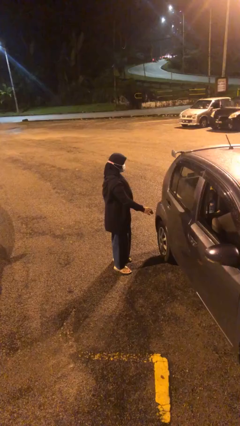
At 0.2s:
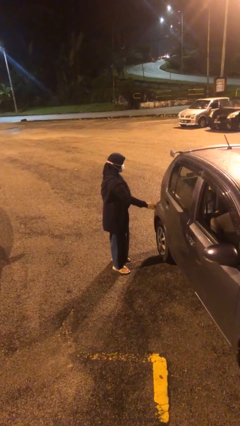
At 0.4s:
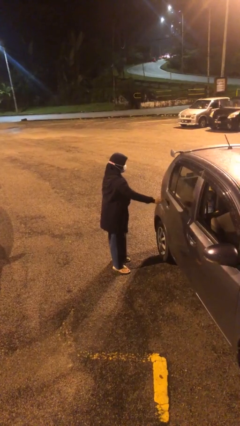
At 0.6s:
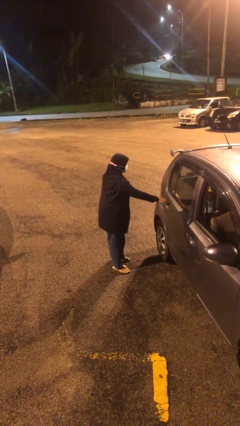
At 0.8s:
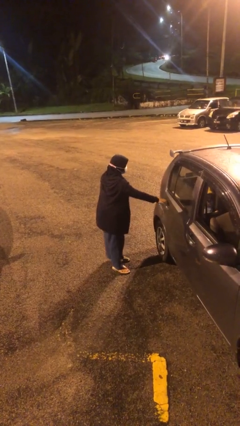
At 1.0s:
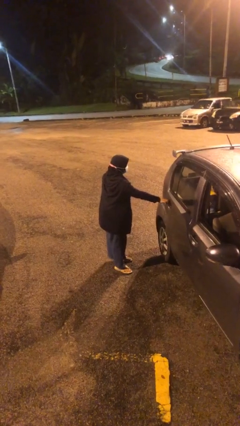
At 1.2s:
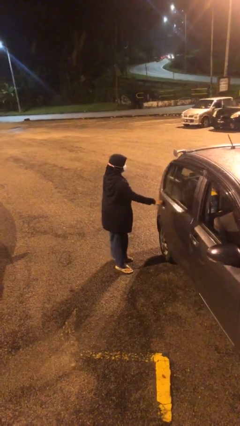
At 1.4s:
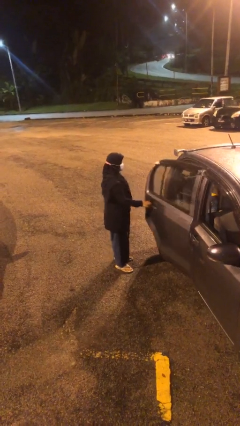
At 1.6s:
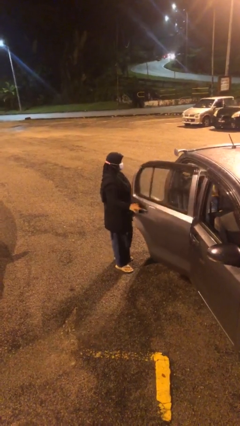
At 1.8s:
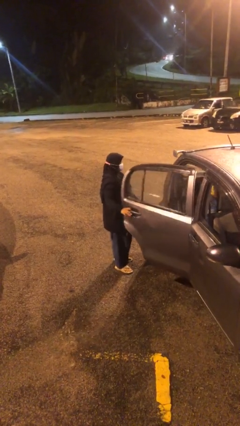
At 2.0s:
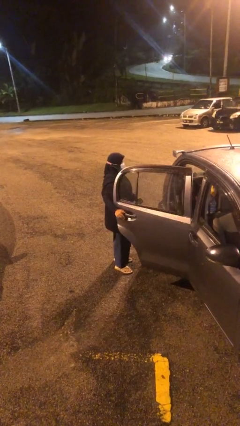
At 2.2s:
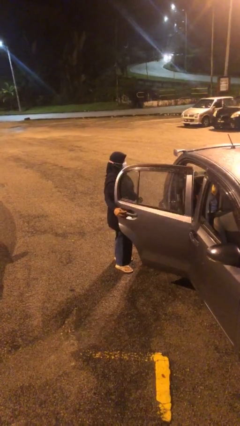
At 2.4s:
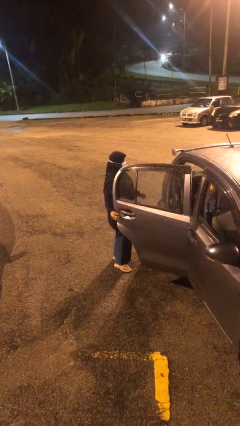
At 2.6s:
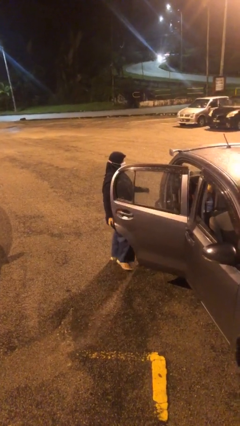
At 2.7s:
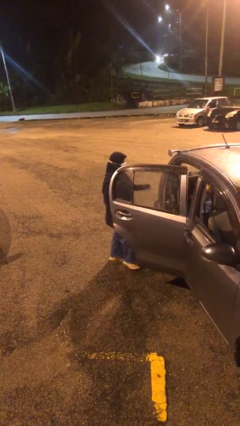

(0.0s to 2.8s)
person opens car door

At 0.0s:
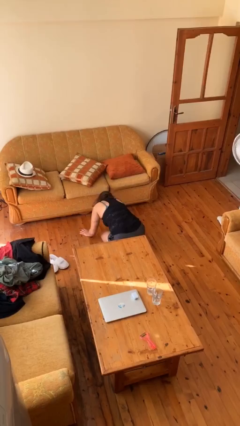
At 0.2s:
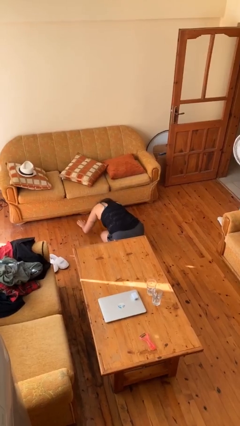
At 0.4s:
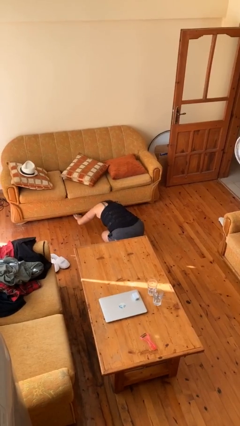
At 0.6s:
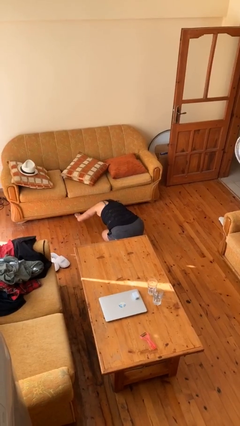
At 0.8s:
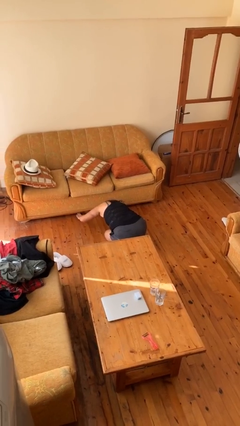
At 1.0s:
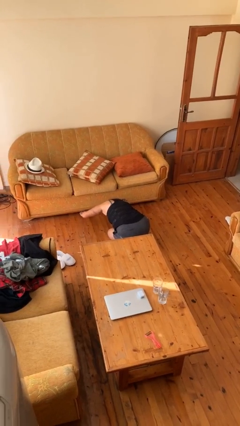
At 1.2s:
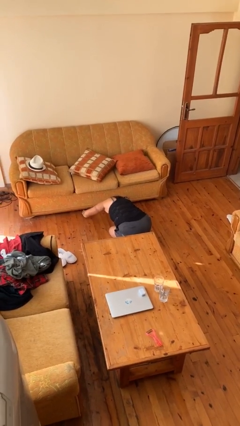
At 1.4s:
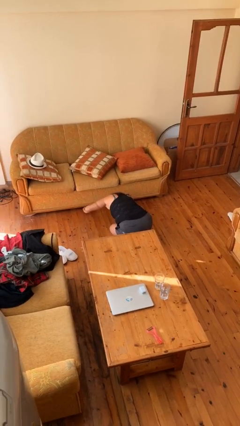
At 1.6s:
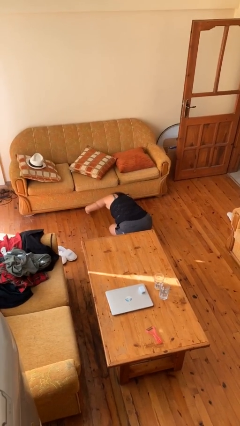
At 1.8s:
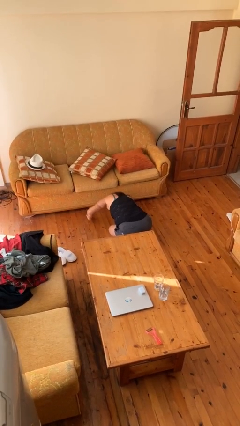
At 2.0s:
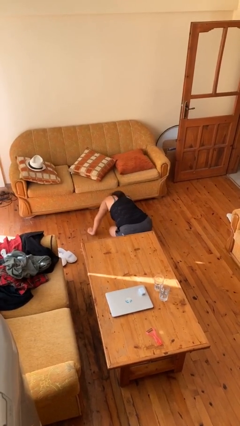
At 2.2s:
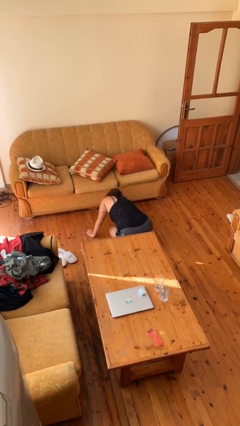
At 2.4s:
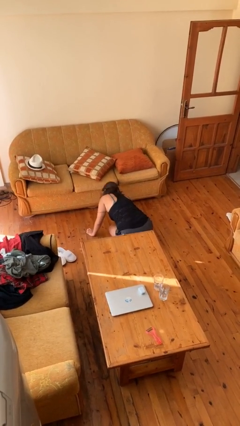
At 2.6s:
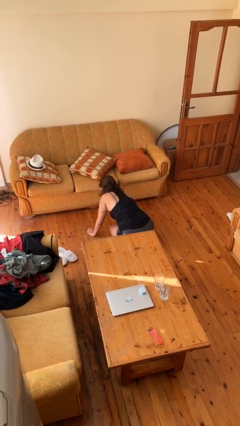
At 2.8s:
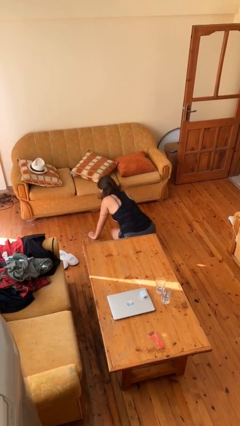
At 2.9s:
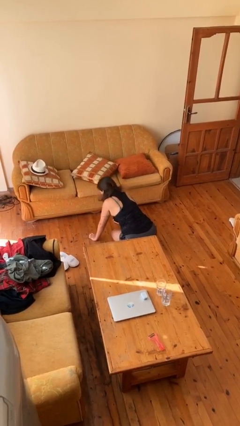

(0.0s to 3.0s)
person searches under couch

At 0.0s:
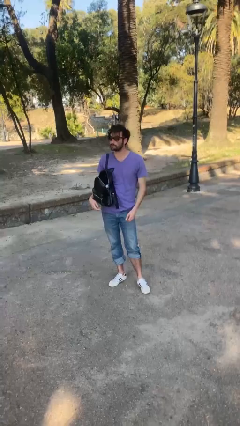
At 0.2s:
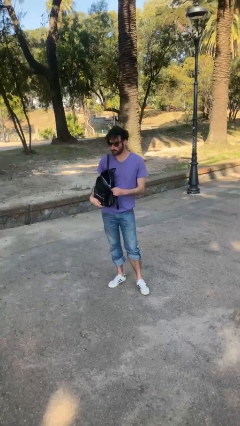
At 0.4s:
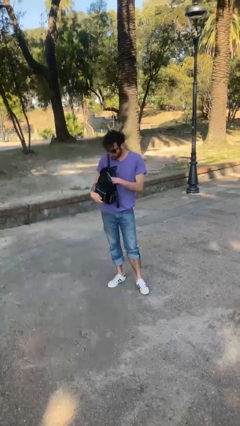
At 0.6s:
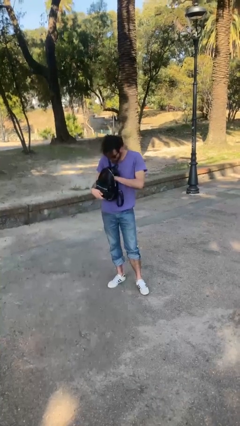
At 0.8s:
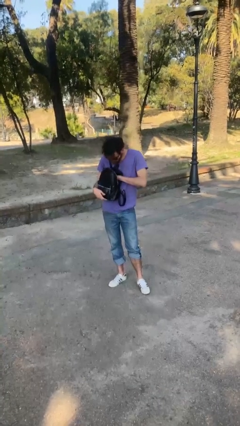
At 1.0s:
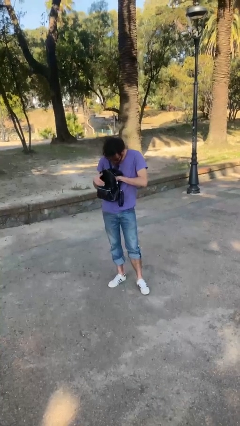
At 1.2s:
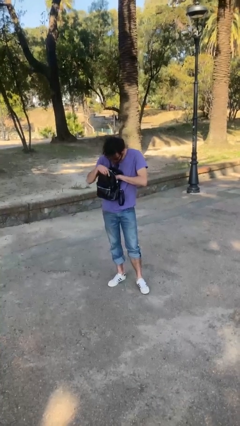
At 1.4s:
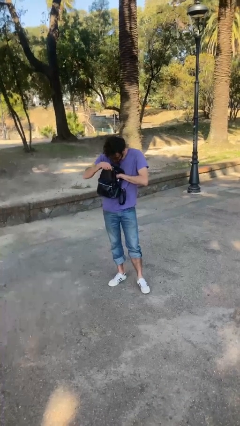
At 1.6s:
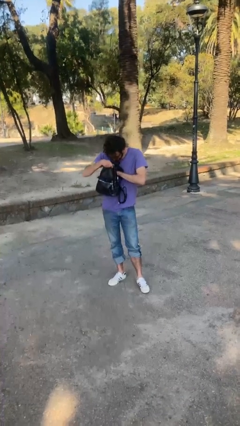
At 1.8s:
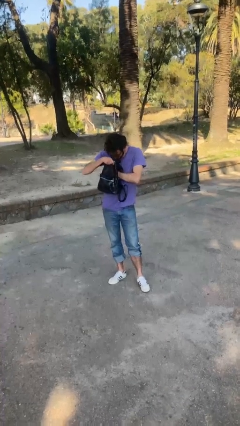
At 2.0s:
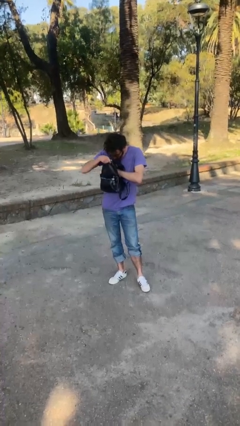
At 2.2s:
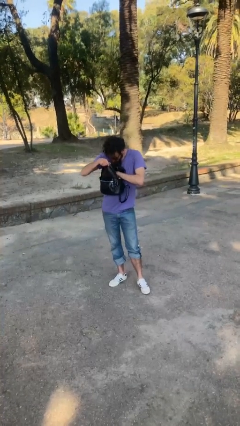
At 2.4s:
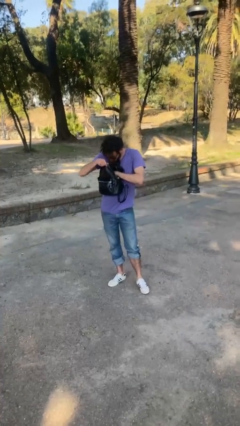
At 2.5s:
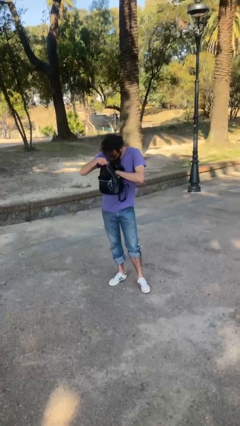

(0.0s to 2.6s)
person searches in purse

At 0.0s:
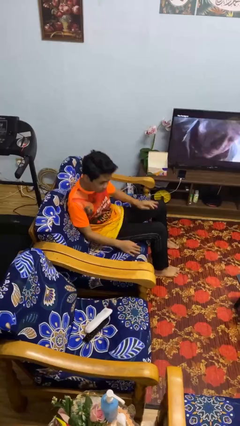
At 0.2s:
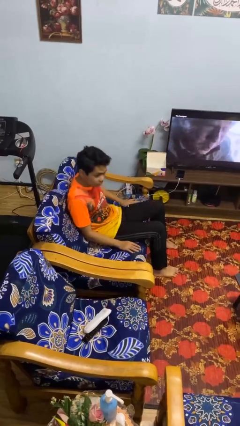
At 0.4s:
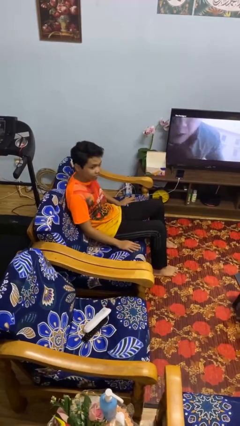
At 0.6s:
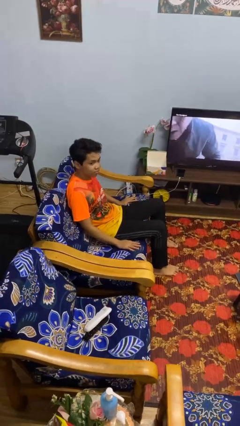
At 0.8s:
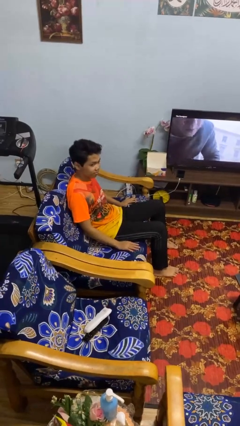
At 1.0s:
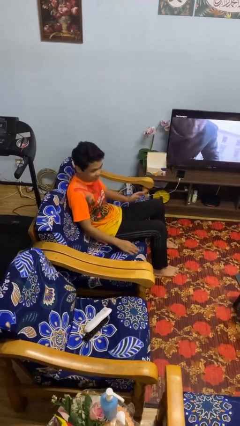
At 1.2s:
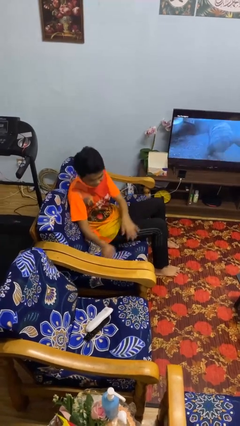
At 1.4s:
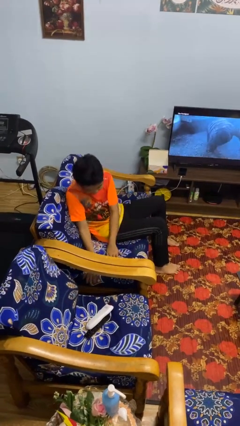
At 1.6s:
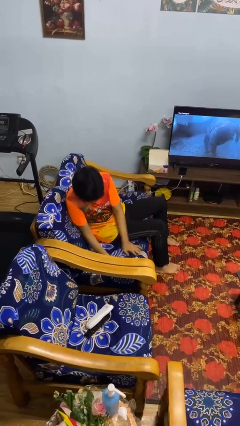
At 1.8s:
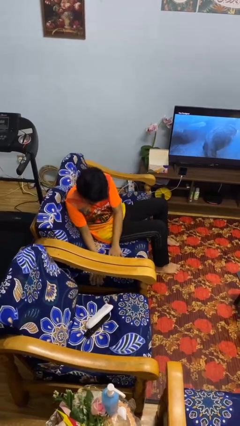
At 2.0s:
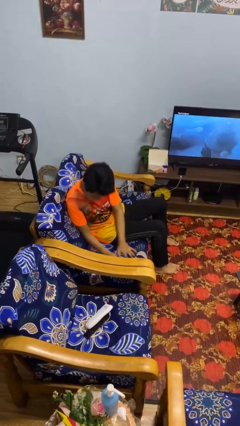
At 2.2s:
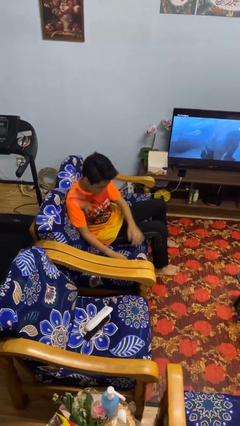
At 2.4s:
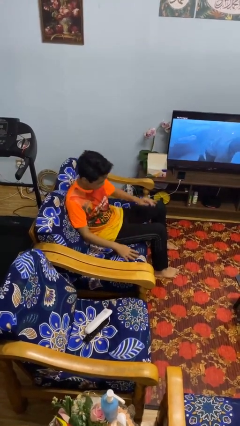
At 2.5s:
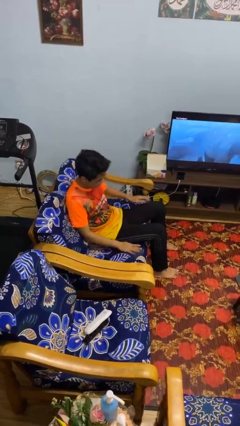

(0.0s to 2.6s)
person searches in couch

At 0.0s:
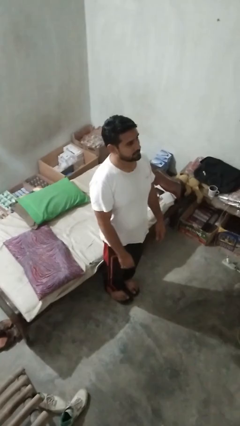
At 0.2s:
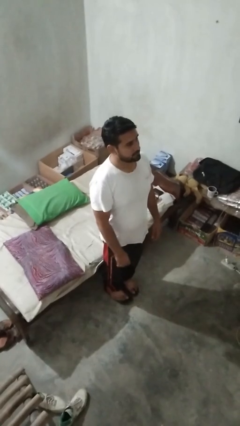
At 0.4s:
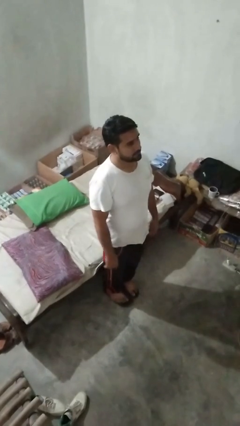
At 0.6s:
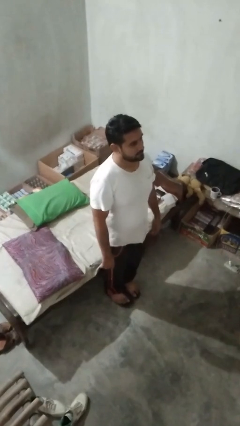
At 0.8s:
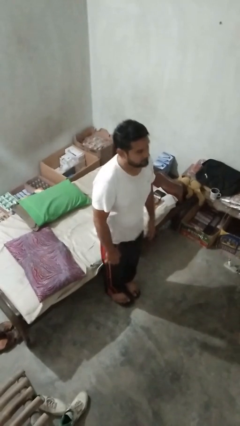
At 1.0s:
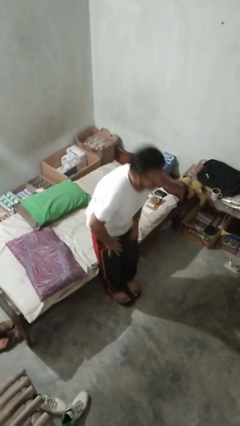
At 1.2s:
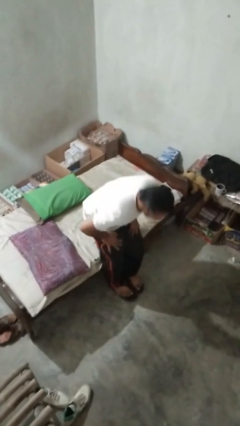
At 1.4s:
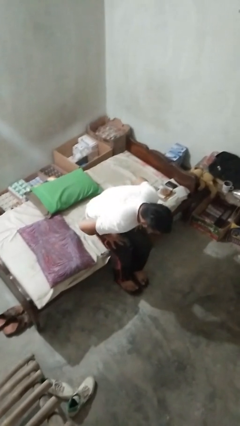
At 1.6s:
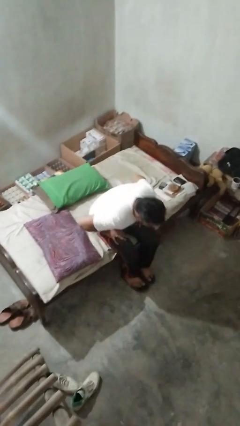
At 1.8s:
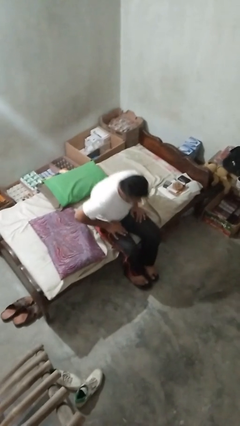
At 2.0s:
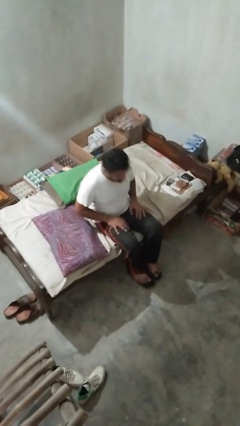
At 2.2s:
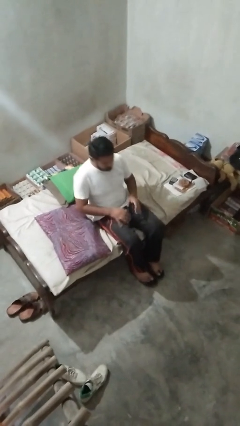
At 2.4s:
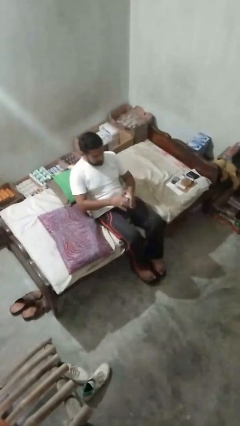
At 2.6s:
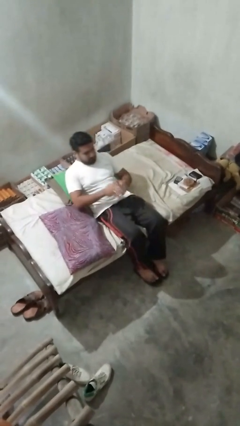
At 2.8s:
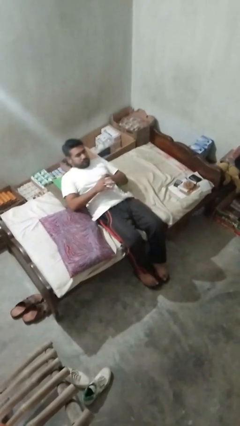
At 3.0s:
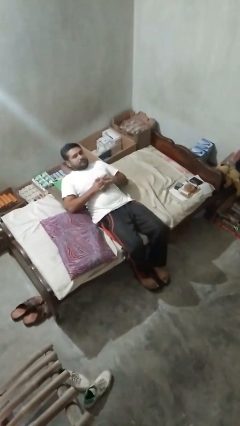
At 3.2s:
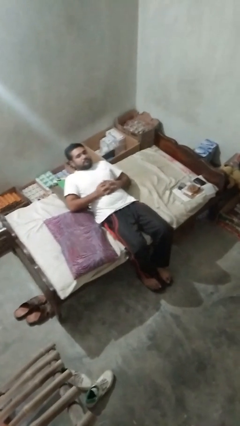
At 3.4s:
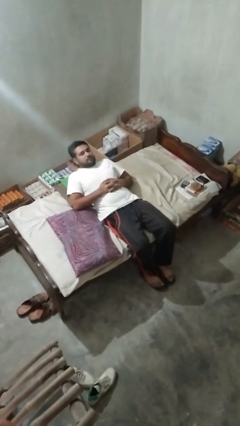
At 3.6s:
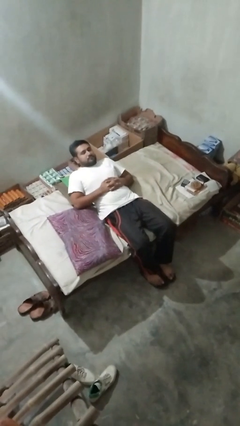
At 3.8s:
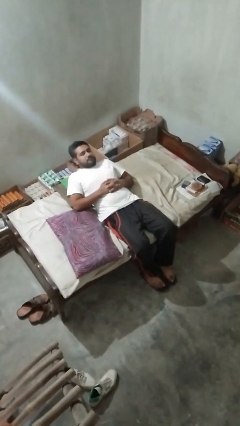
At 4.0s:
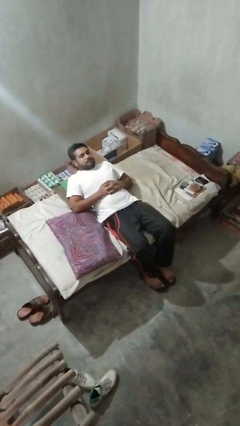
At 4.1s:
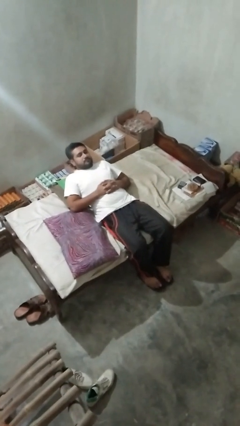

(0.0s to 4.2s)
person lies down on couch

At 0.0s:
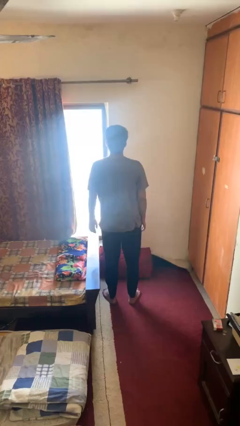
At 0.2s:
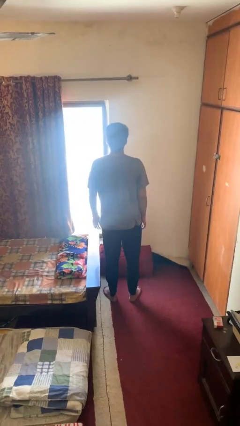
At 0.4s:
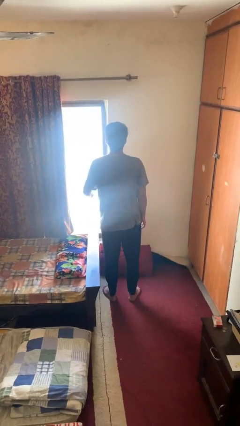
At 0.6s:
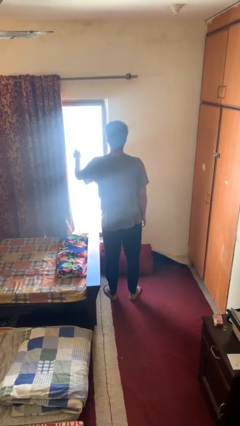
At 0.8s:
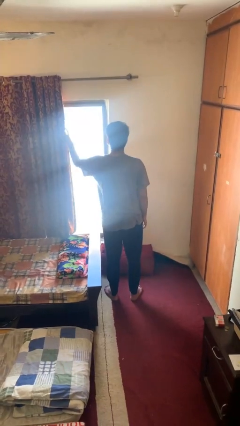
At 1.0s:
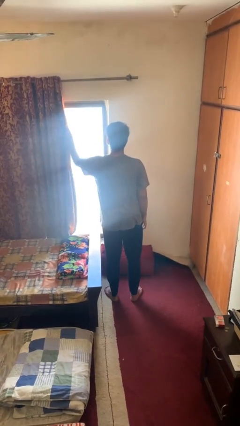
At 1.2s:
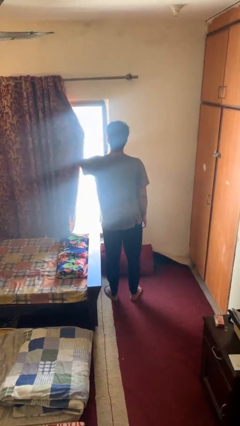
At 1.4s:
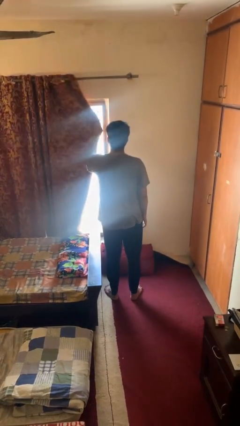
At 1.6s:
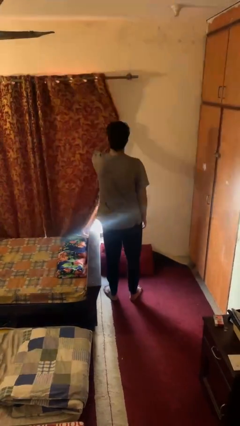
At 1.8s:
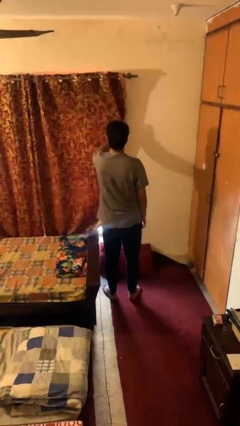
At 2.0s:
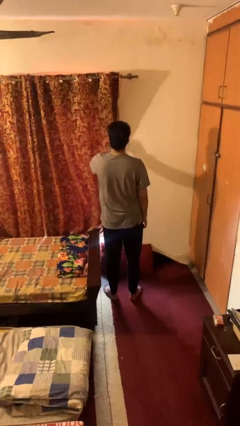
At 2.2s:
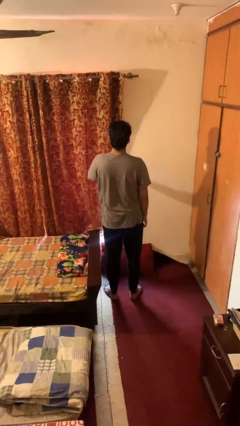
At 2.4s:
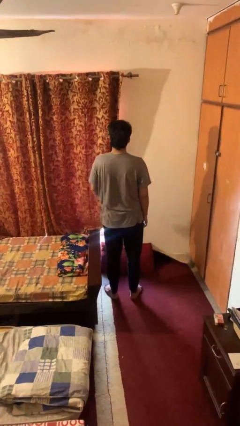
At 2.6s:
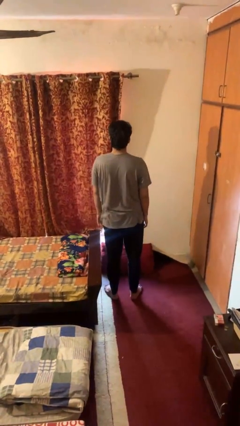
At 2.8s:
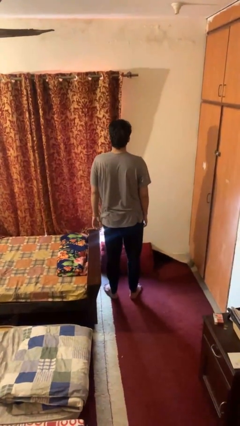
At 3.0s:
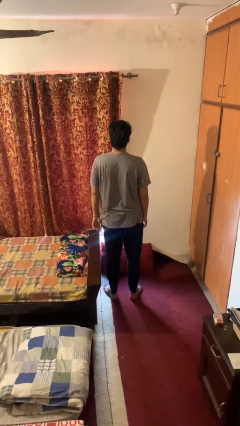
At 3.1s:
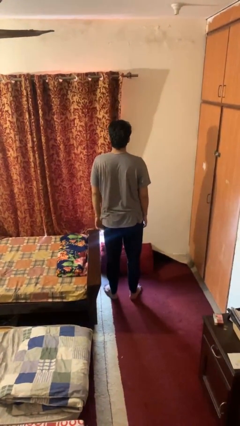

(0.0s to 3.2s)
person closes curtains
